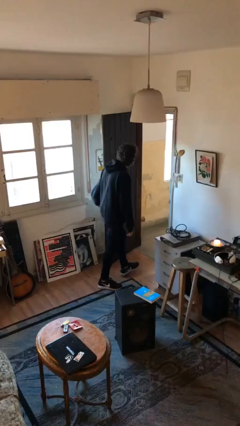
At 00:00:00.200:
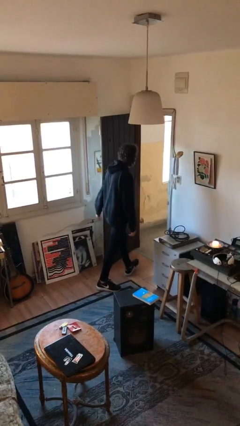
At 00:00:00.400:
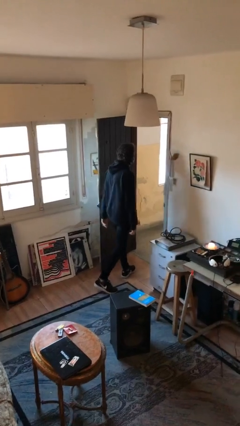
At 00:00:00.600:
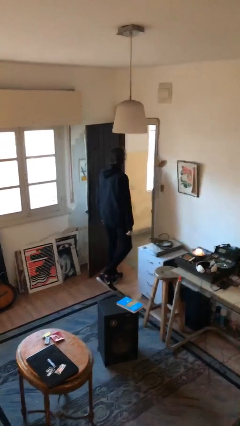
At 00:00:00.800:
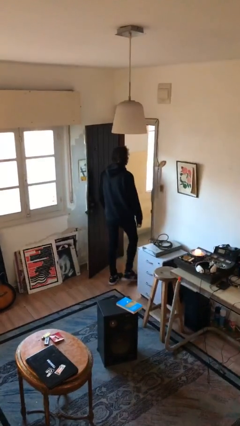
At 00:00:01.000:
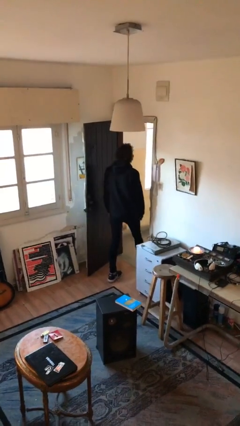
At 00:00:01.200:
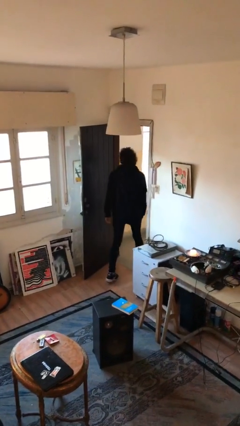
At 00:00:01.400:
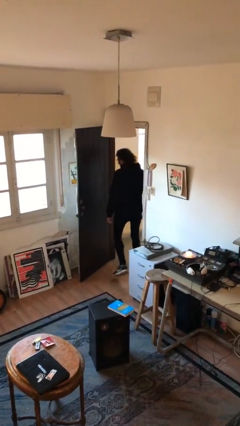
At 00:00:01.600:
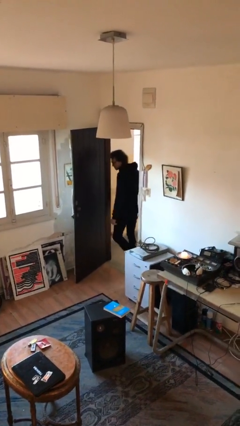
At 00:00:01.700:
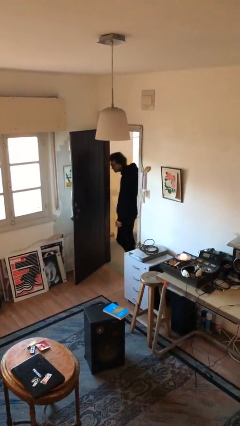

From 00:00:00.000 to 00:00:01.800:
person exits scene through structure

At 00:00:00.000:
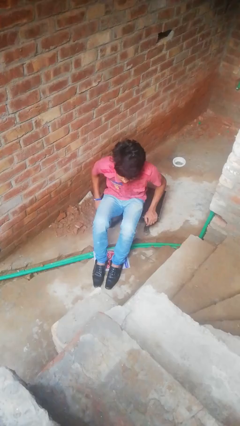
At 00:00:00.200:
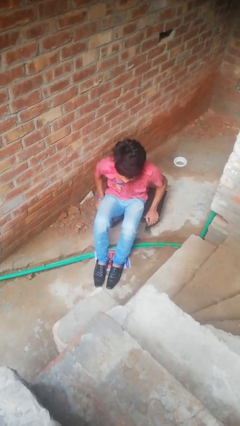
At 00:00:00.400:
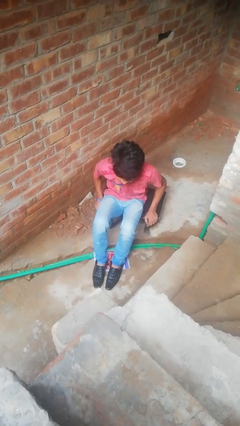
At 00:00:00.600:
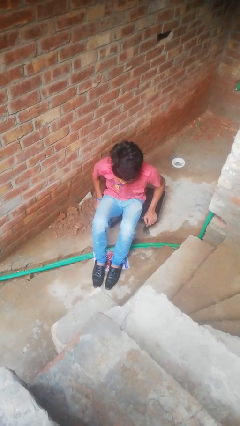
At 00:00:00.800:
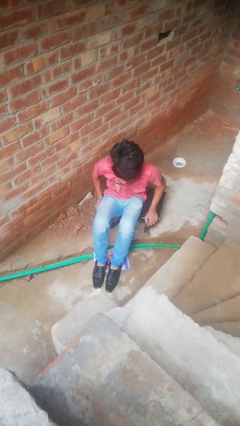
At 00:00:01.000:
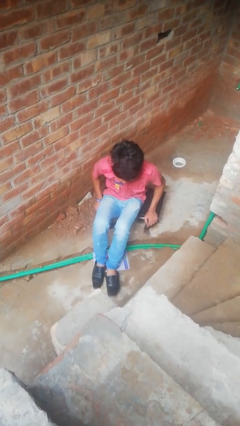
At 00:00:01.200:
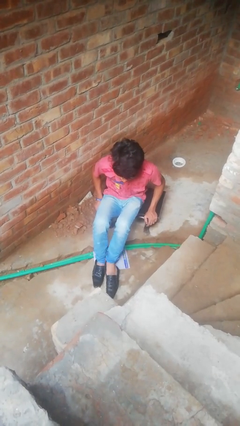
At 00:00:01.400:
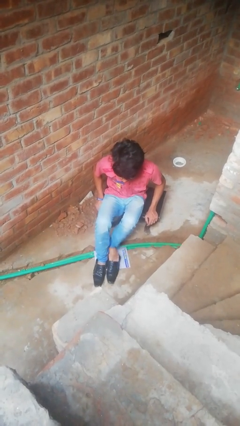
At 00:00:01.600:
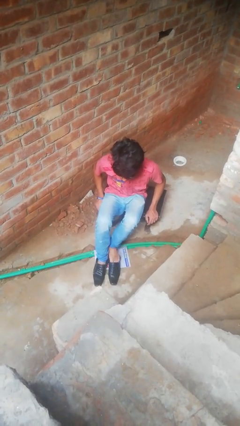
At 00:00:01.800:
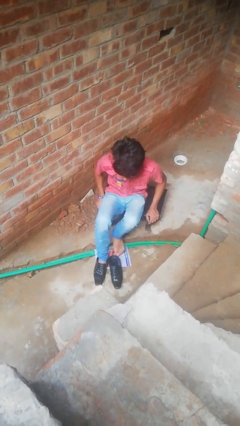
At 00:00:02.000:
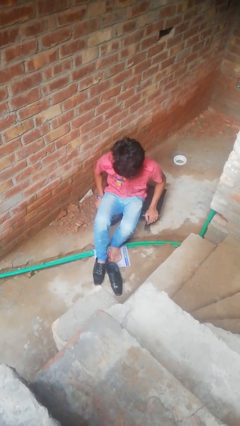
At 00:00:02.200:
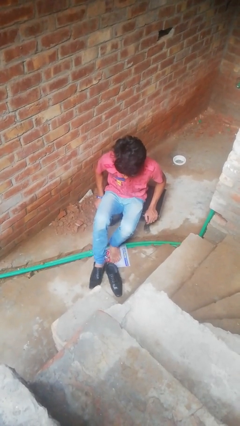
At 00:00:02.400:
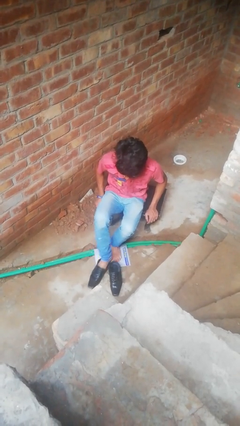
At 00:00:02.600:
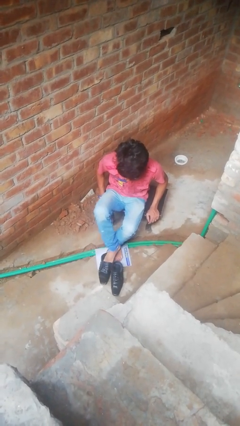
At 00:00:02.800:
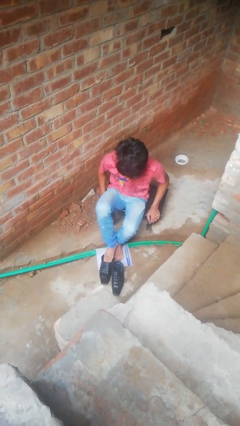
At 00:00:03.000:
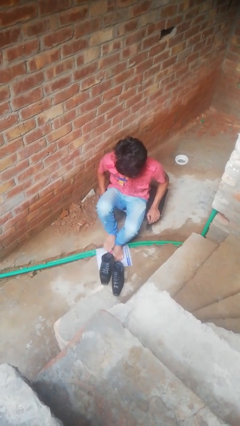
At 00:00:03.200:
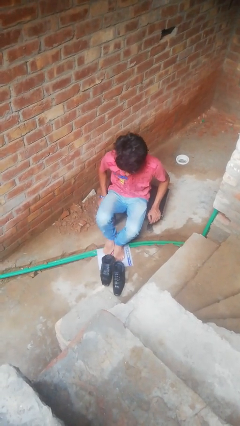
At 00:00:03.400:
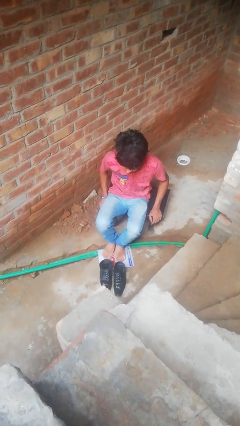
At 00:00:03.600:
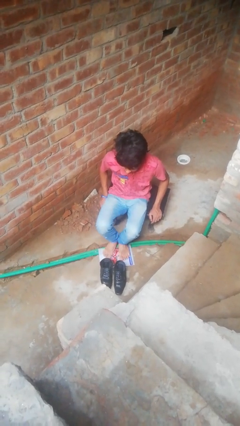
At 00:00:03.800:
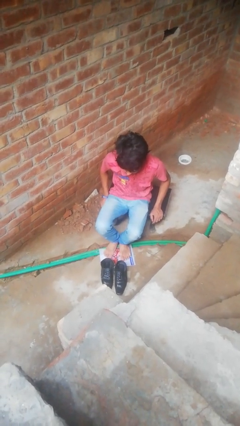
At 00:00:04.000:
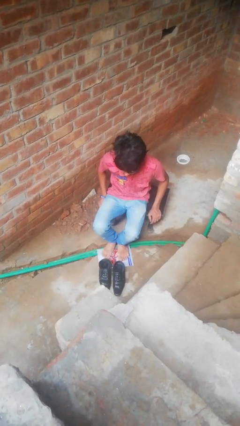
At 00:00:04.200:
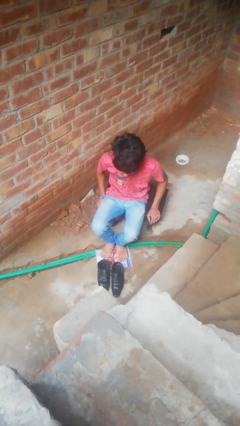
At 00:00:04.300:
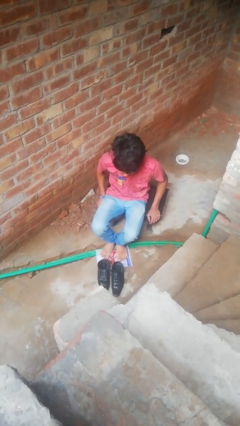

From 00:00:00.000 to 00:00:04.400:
person takes off shoes

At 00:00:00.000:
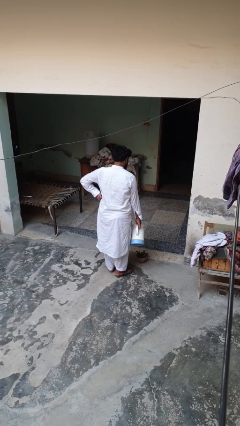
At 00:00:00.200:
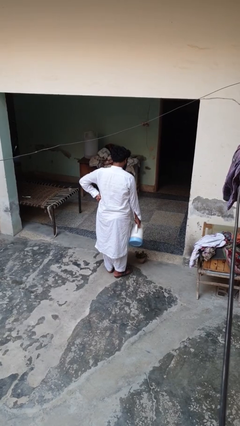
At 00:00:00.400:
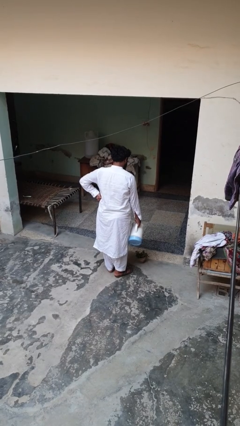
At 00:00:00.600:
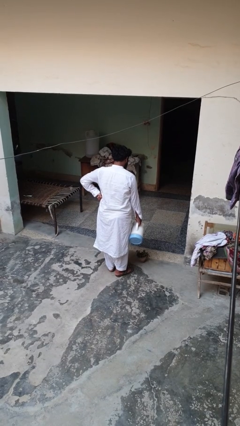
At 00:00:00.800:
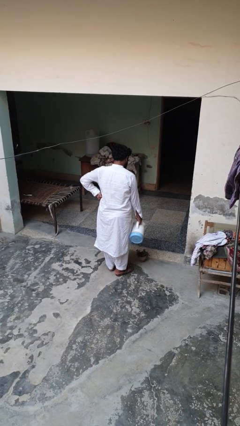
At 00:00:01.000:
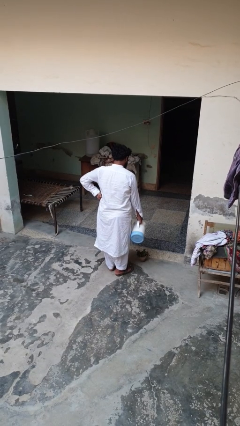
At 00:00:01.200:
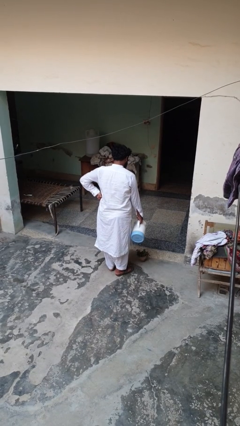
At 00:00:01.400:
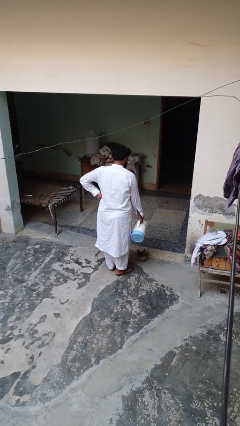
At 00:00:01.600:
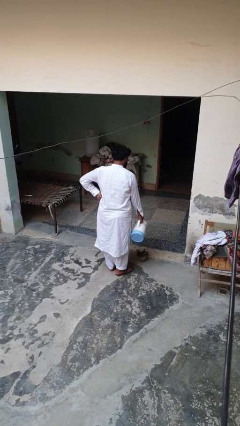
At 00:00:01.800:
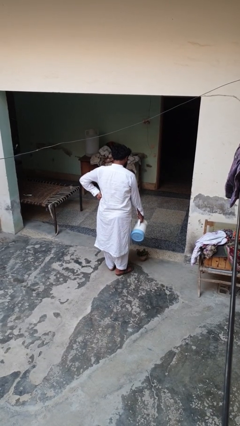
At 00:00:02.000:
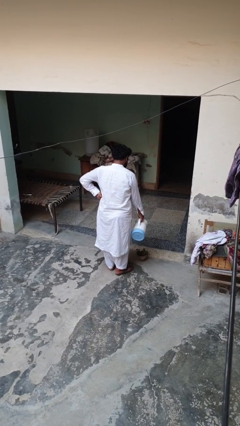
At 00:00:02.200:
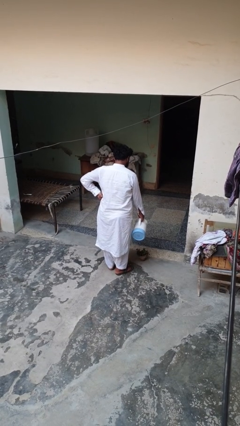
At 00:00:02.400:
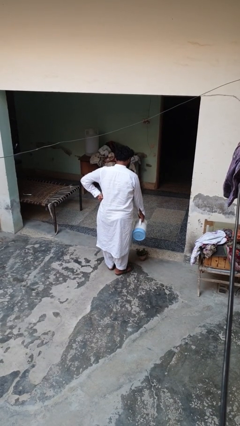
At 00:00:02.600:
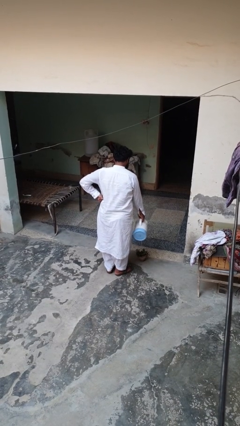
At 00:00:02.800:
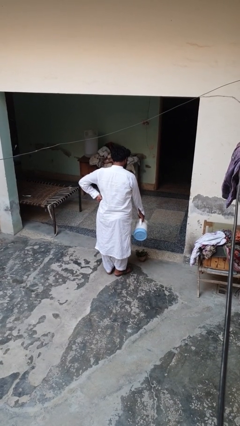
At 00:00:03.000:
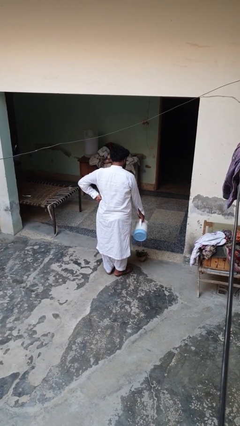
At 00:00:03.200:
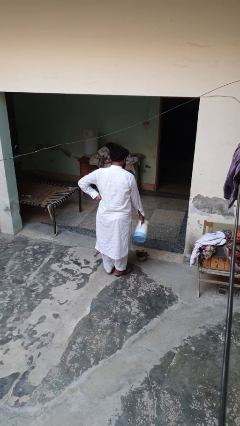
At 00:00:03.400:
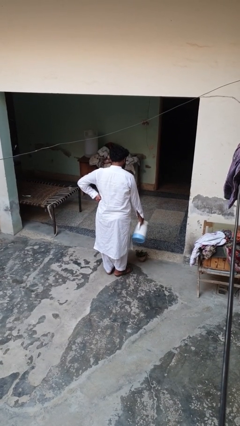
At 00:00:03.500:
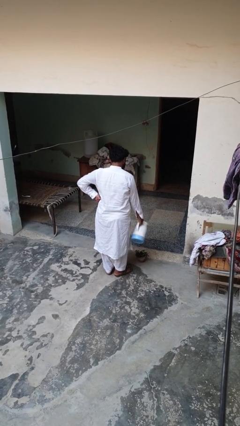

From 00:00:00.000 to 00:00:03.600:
person waters houseplant

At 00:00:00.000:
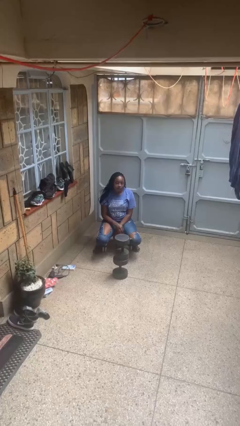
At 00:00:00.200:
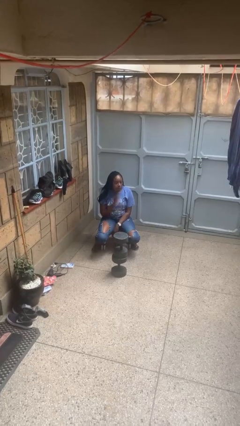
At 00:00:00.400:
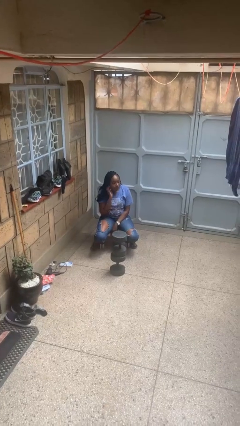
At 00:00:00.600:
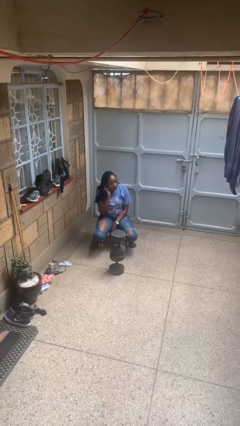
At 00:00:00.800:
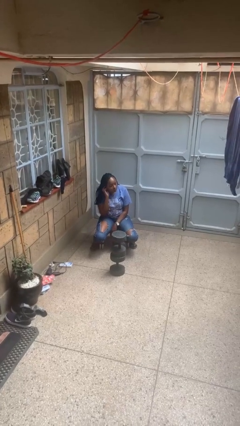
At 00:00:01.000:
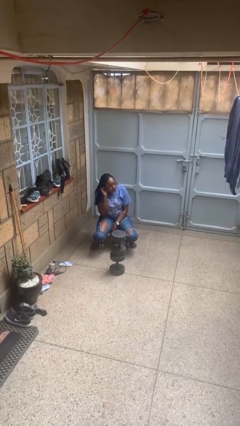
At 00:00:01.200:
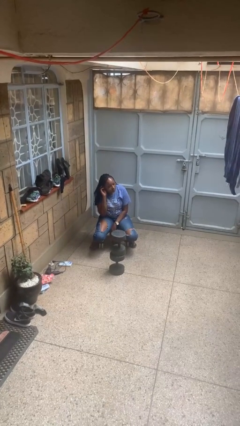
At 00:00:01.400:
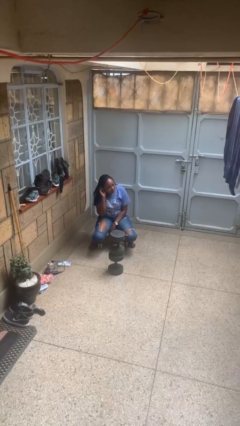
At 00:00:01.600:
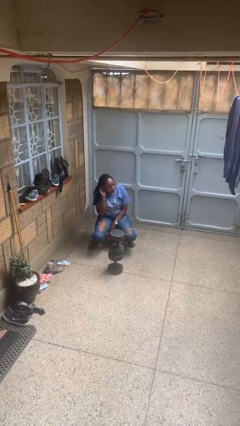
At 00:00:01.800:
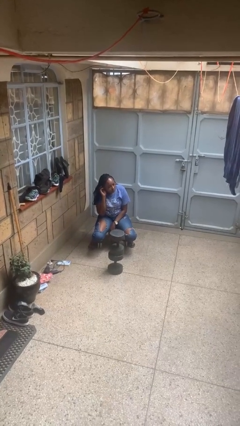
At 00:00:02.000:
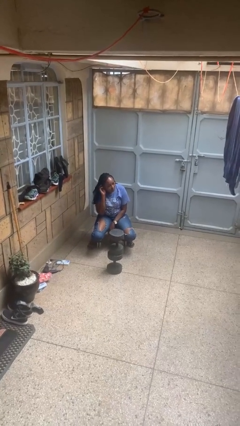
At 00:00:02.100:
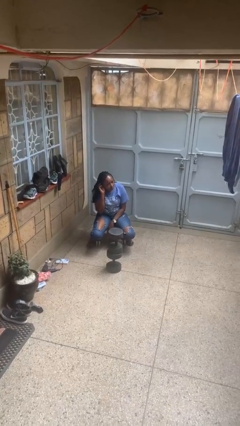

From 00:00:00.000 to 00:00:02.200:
person gestures listen closely

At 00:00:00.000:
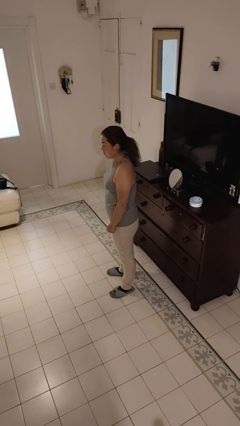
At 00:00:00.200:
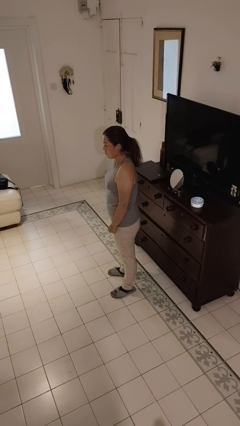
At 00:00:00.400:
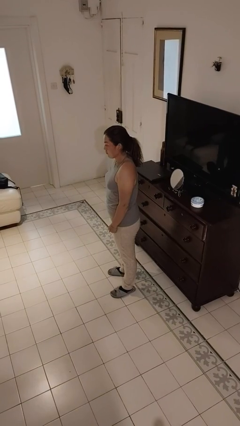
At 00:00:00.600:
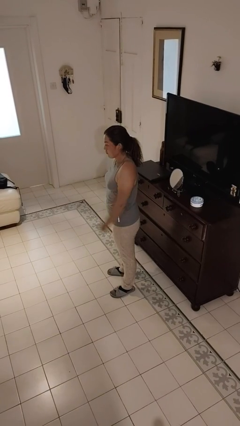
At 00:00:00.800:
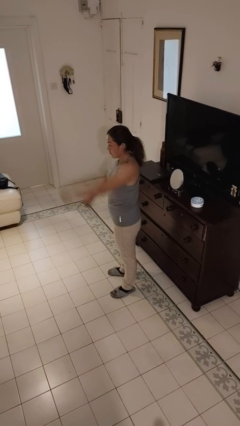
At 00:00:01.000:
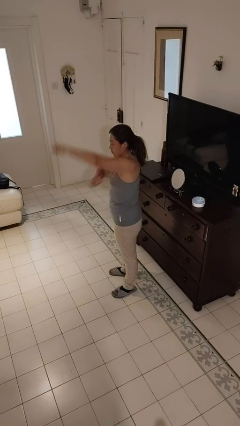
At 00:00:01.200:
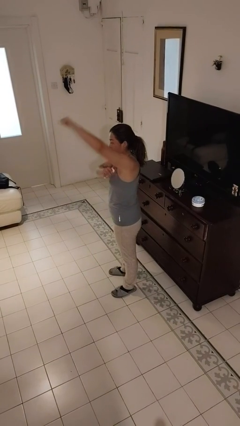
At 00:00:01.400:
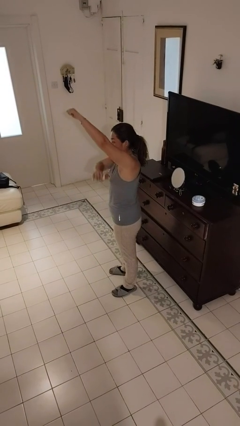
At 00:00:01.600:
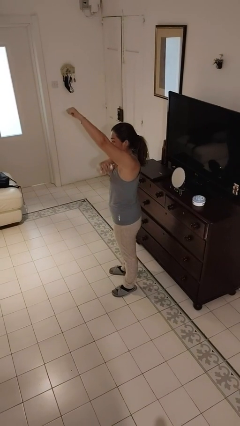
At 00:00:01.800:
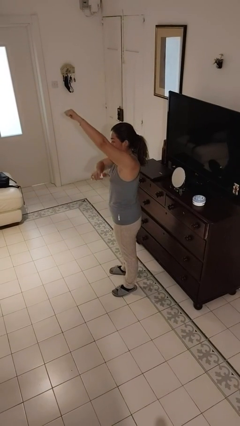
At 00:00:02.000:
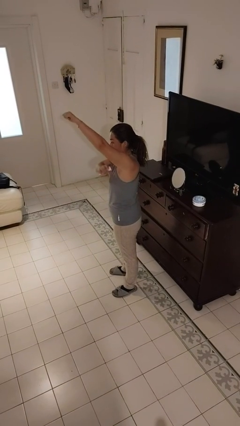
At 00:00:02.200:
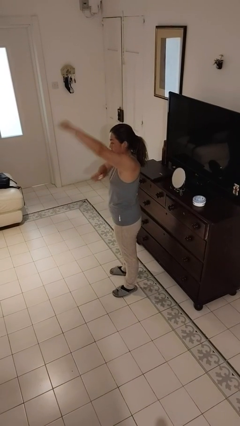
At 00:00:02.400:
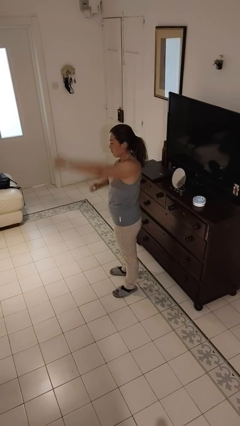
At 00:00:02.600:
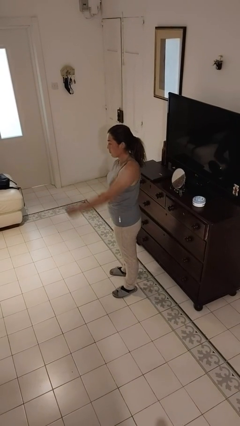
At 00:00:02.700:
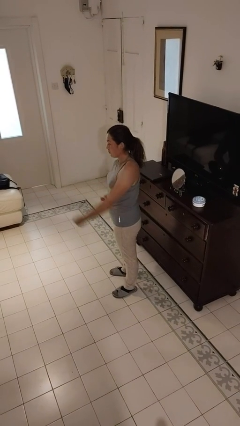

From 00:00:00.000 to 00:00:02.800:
person applies deodorant

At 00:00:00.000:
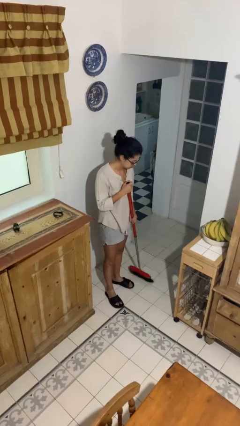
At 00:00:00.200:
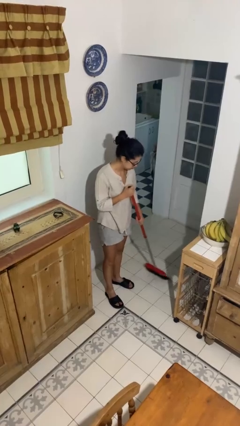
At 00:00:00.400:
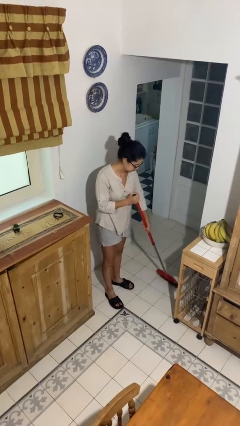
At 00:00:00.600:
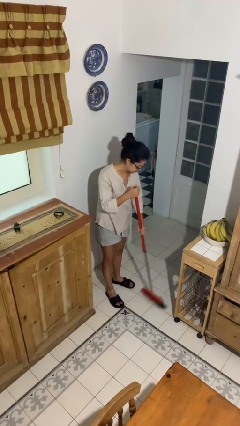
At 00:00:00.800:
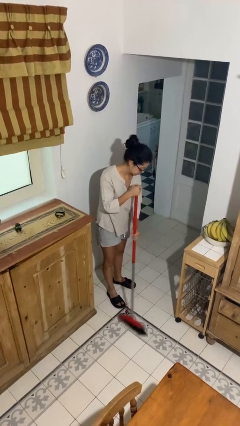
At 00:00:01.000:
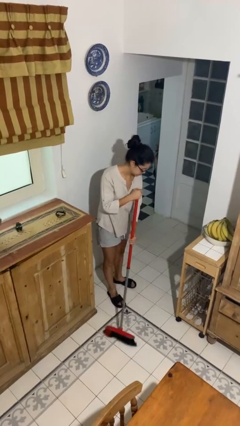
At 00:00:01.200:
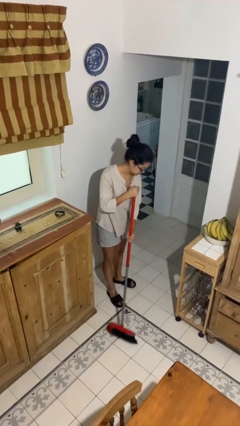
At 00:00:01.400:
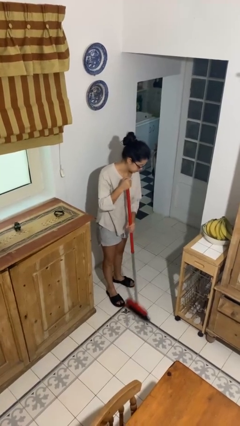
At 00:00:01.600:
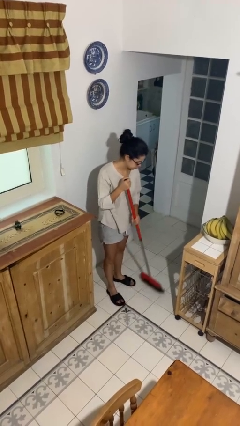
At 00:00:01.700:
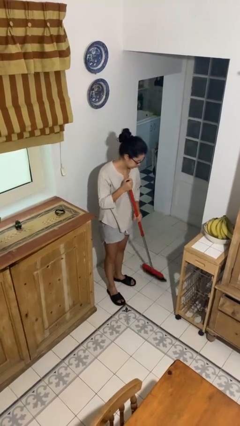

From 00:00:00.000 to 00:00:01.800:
person sweeps floor

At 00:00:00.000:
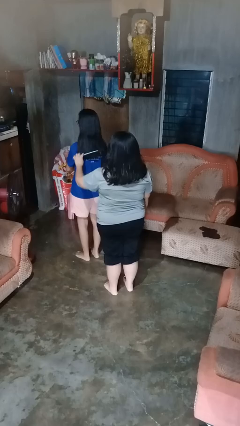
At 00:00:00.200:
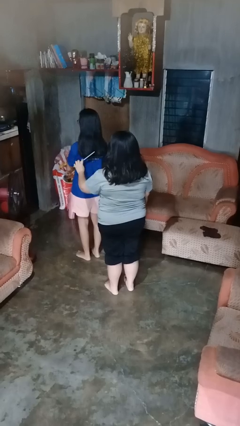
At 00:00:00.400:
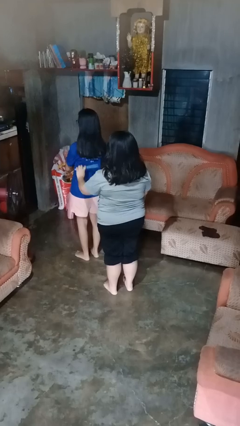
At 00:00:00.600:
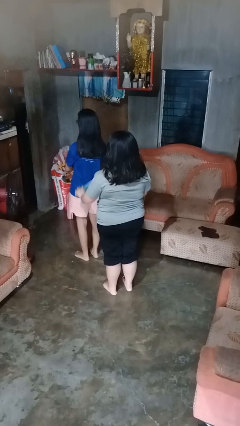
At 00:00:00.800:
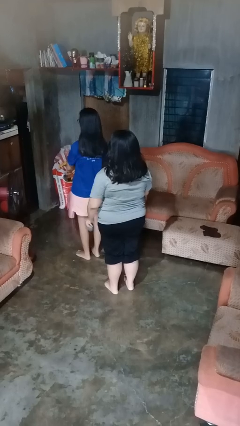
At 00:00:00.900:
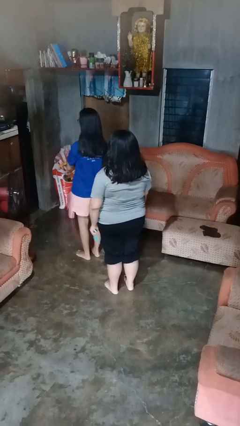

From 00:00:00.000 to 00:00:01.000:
person brushes hair of person
